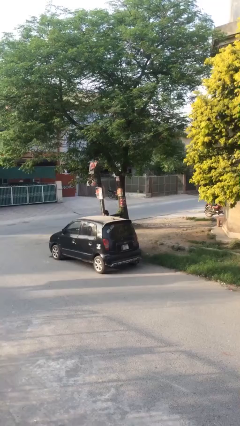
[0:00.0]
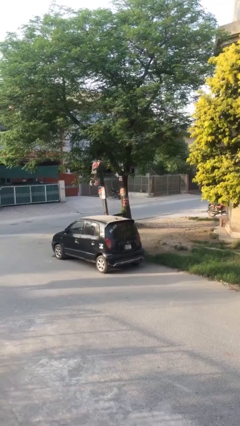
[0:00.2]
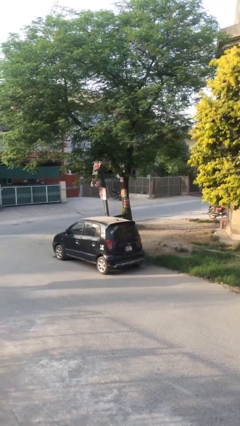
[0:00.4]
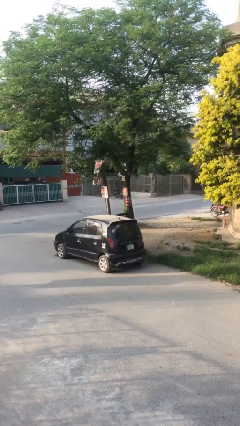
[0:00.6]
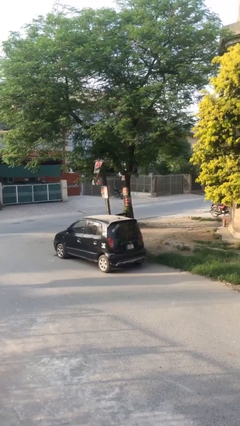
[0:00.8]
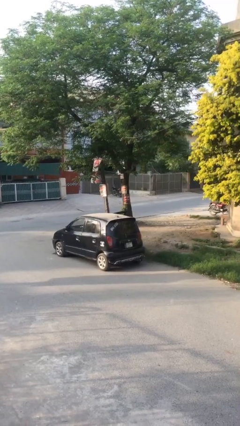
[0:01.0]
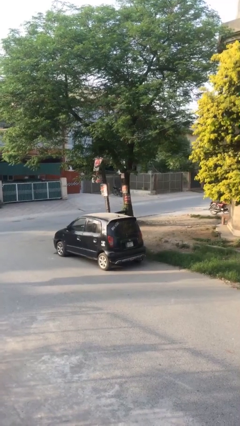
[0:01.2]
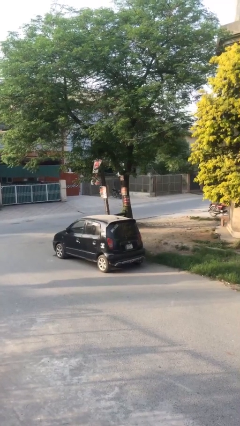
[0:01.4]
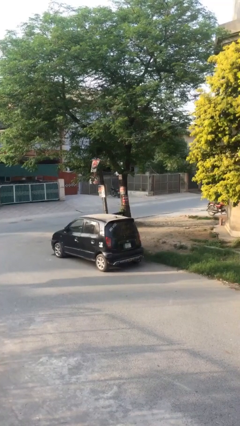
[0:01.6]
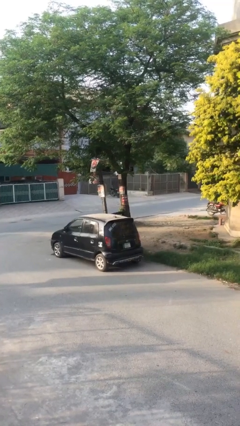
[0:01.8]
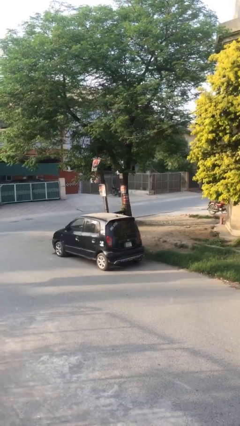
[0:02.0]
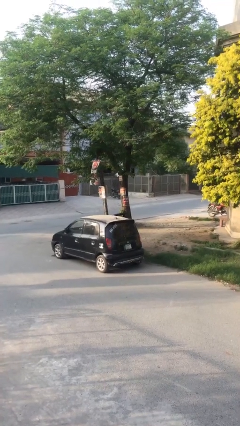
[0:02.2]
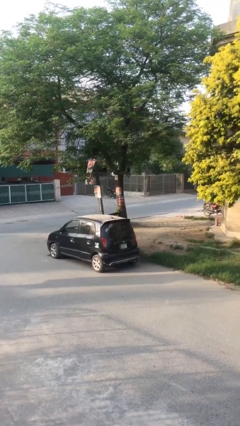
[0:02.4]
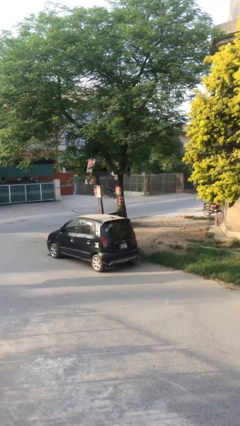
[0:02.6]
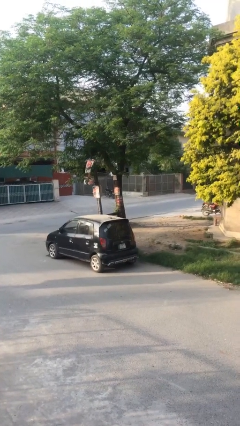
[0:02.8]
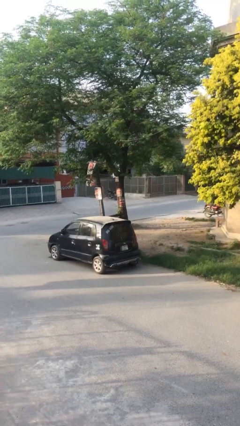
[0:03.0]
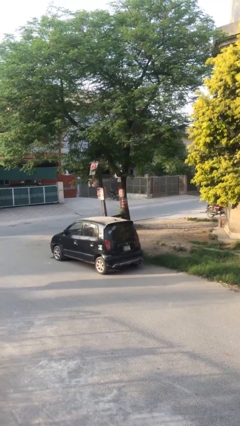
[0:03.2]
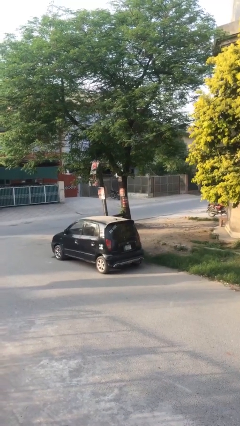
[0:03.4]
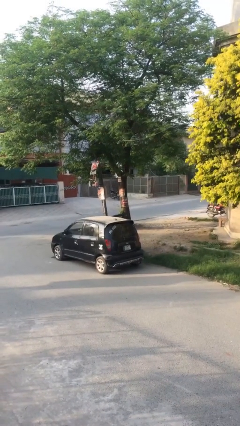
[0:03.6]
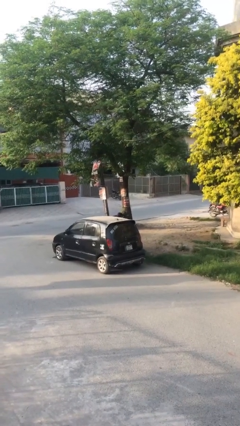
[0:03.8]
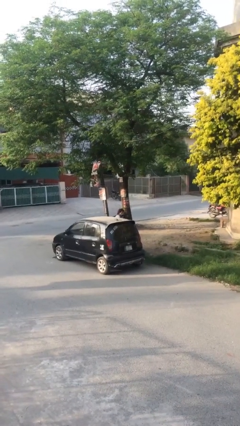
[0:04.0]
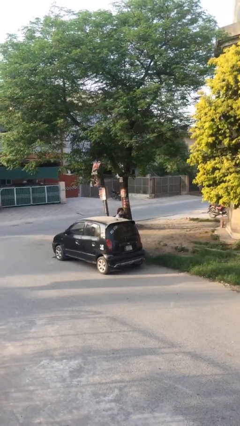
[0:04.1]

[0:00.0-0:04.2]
person enters car

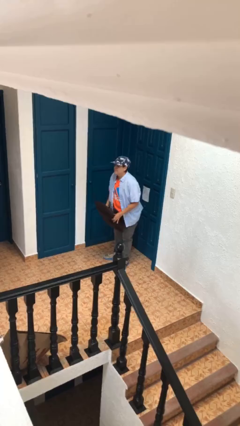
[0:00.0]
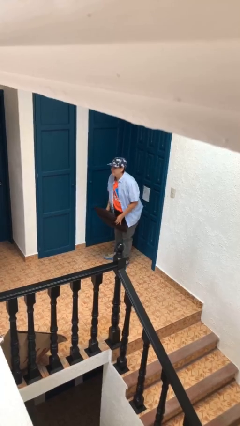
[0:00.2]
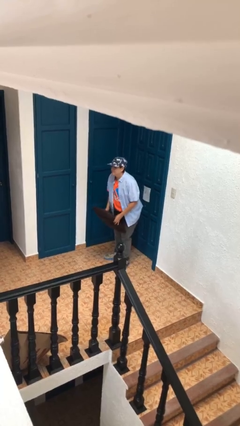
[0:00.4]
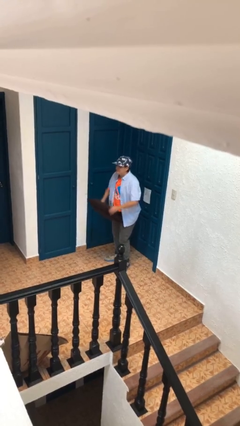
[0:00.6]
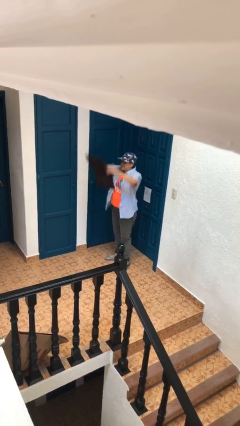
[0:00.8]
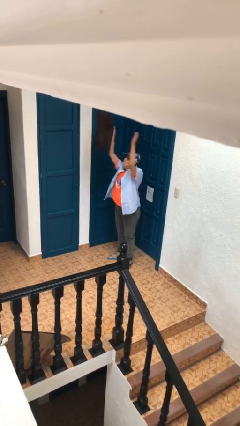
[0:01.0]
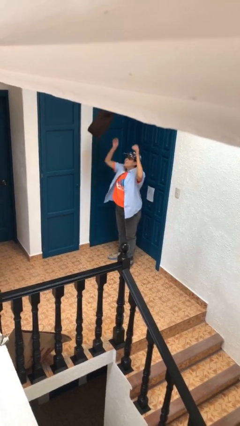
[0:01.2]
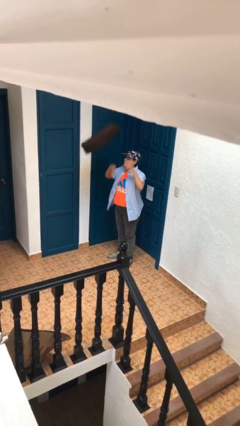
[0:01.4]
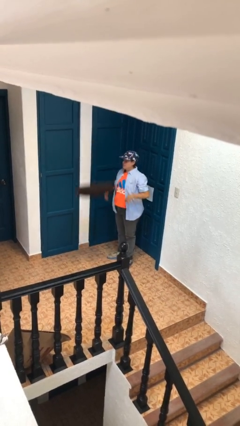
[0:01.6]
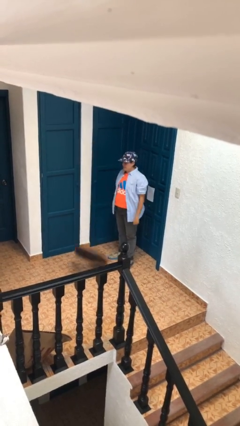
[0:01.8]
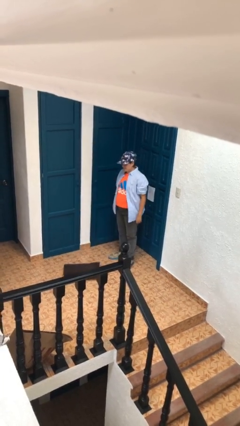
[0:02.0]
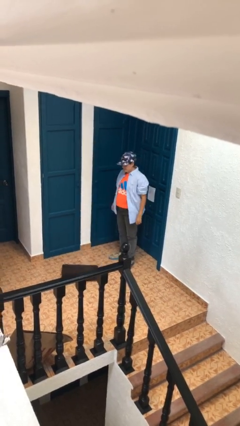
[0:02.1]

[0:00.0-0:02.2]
person throws object into air

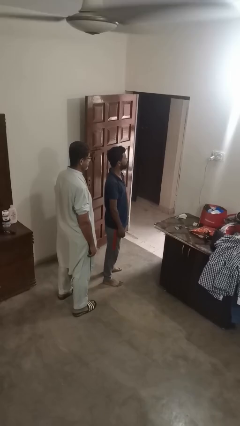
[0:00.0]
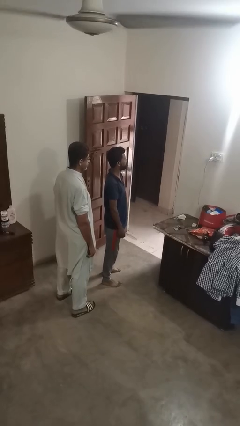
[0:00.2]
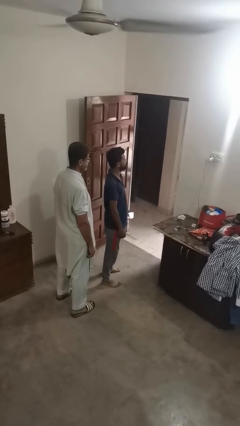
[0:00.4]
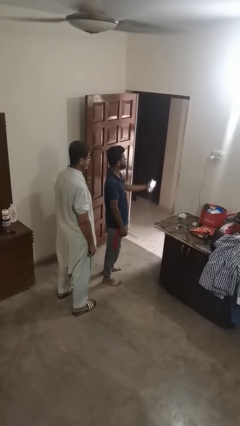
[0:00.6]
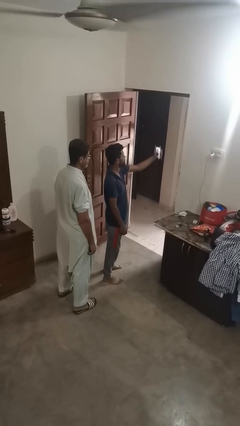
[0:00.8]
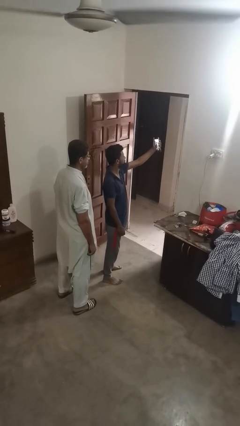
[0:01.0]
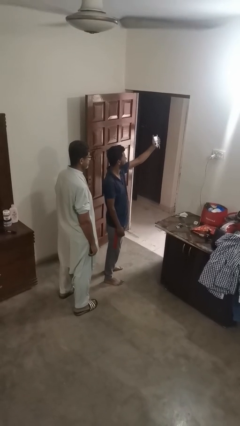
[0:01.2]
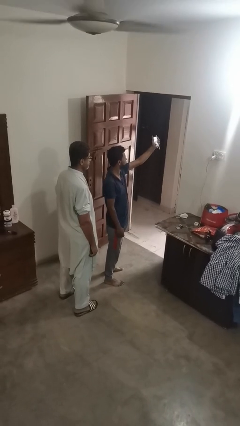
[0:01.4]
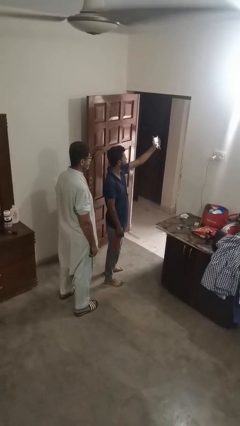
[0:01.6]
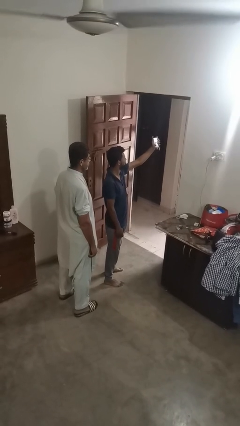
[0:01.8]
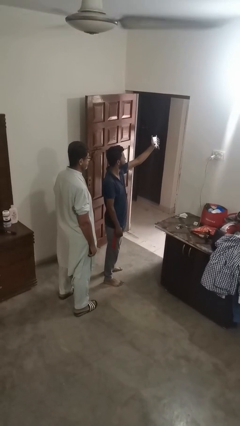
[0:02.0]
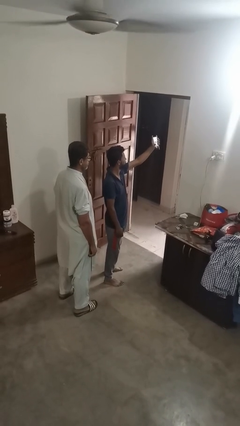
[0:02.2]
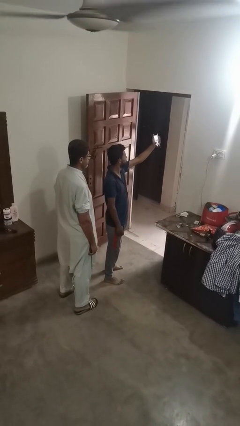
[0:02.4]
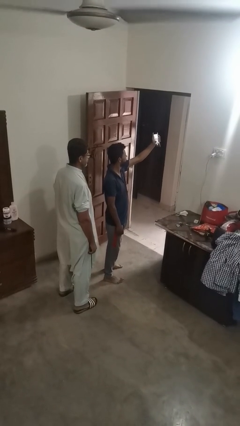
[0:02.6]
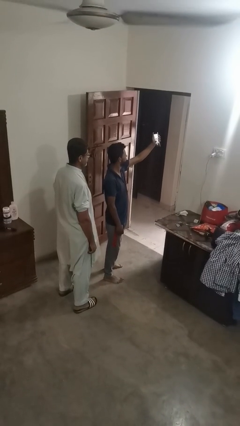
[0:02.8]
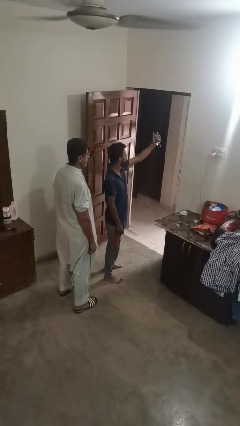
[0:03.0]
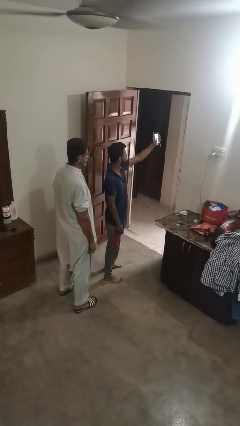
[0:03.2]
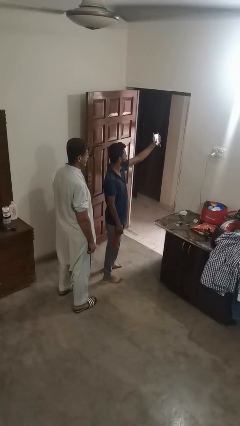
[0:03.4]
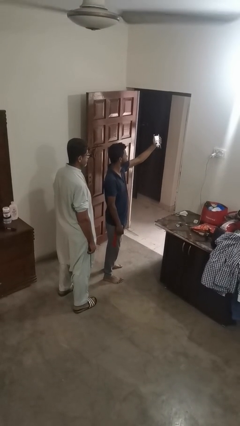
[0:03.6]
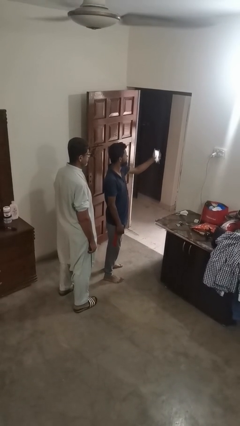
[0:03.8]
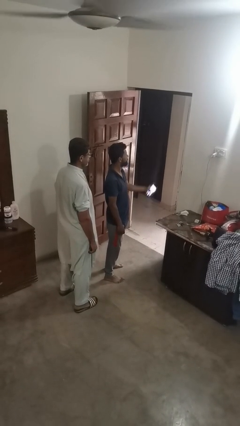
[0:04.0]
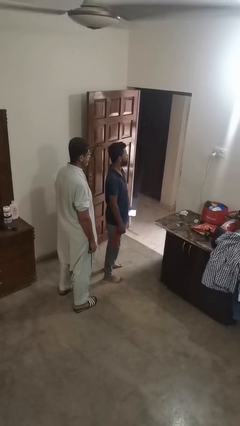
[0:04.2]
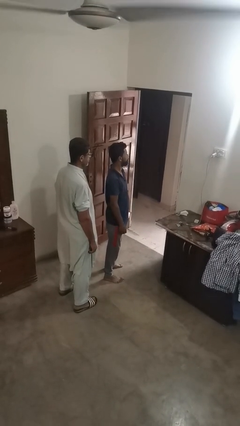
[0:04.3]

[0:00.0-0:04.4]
person takes selfie with person

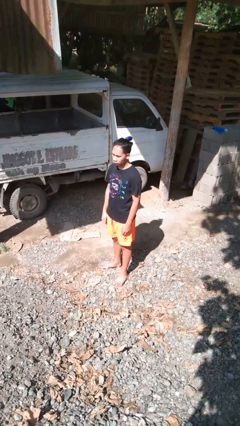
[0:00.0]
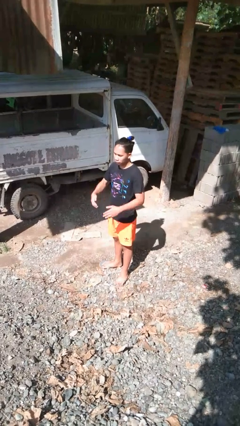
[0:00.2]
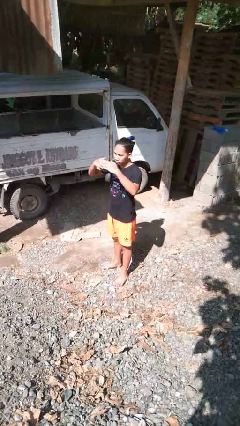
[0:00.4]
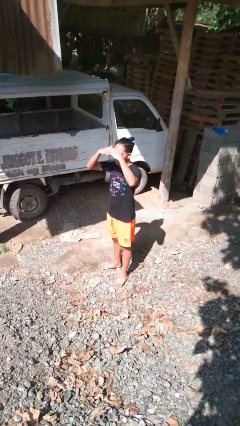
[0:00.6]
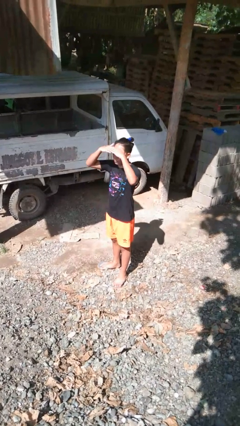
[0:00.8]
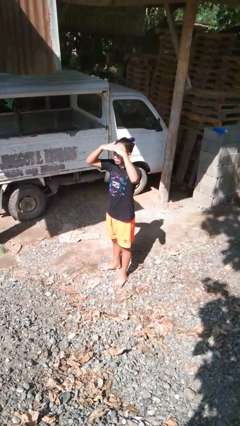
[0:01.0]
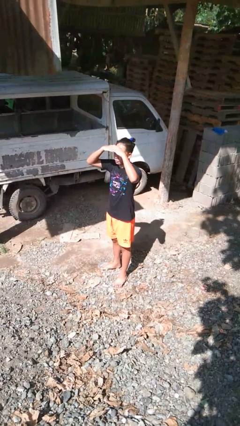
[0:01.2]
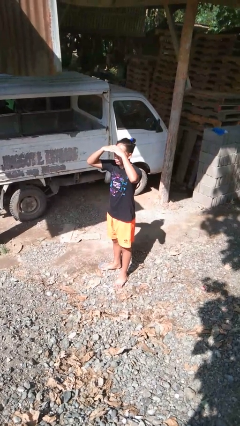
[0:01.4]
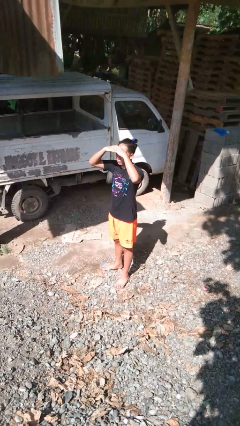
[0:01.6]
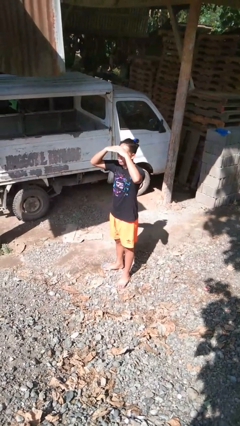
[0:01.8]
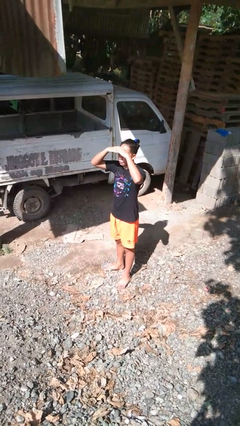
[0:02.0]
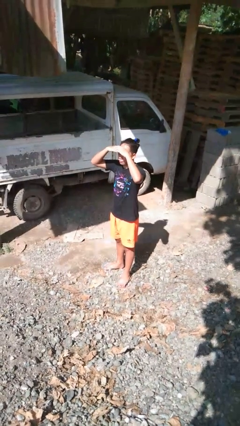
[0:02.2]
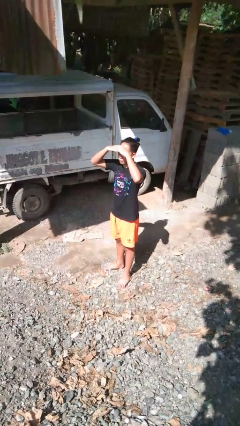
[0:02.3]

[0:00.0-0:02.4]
person shades eyes

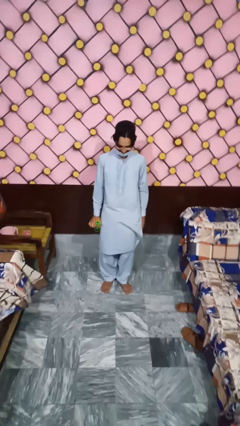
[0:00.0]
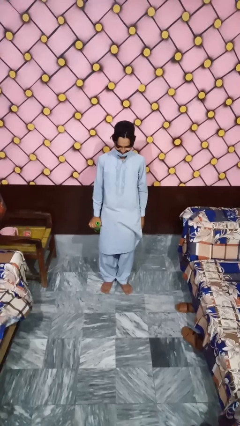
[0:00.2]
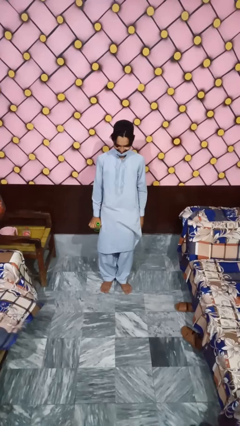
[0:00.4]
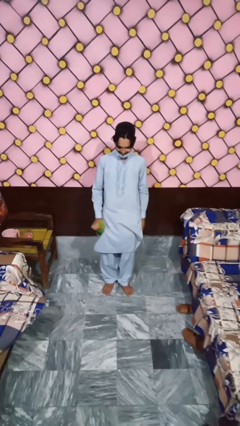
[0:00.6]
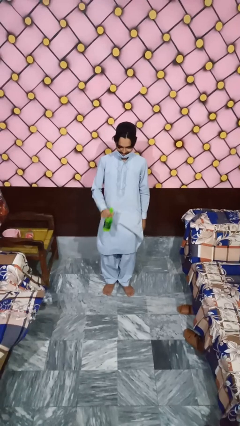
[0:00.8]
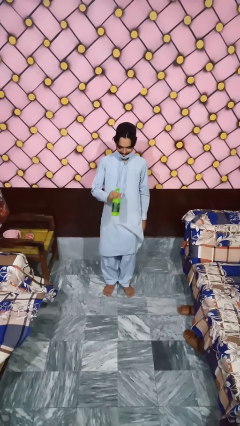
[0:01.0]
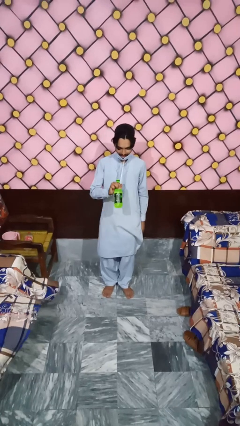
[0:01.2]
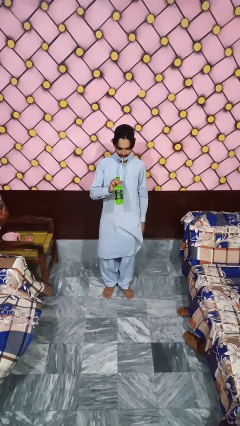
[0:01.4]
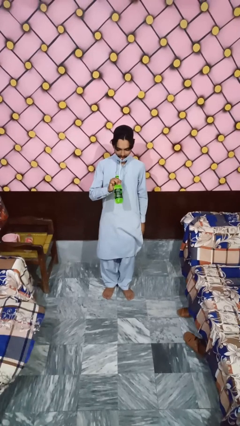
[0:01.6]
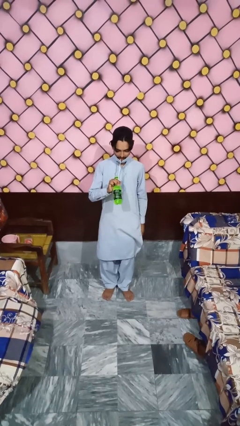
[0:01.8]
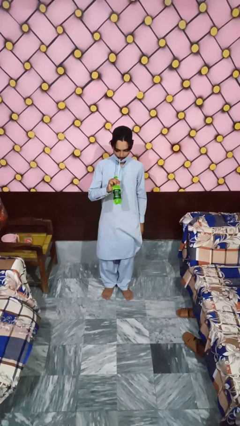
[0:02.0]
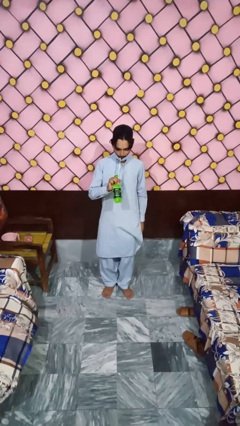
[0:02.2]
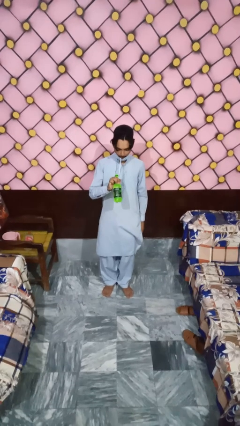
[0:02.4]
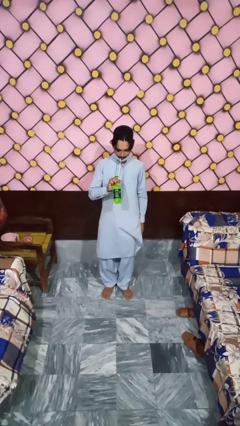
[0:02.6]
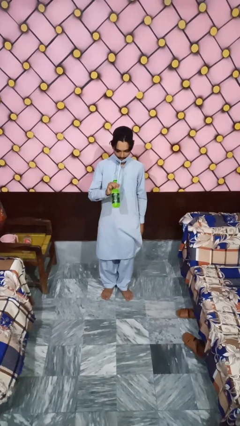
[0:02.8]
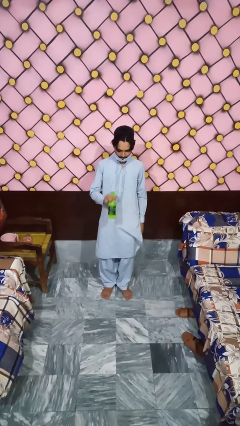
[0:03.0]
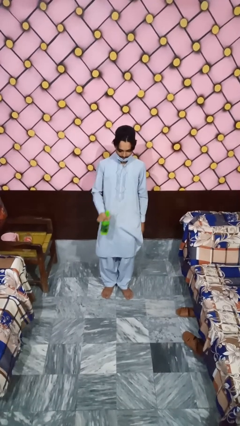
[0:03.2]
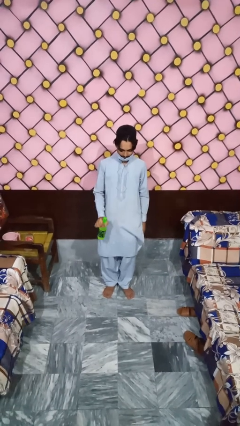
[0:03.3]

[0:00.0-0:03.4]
person drinks from straw

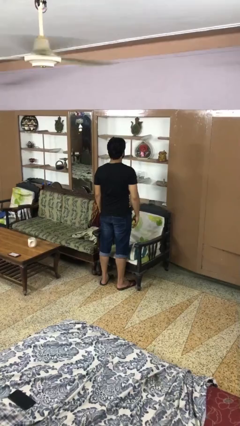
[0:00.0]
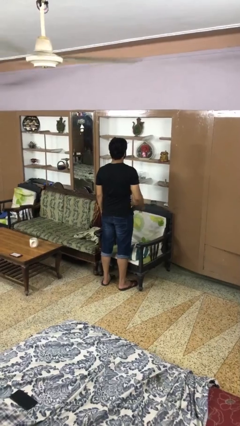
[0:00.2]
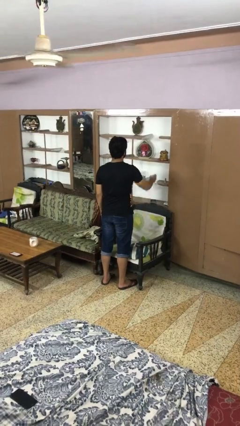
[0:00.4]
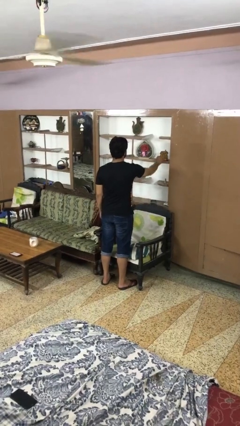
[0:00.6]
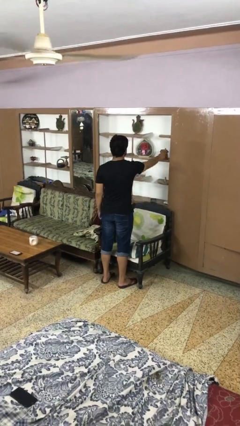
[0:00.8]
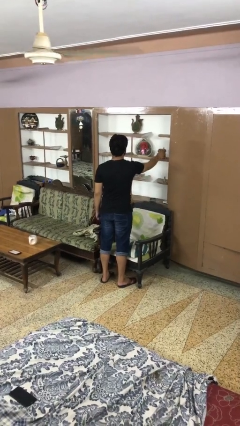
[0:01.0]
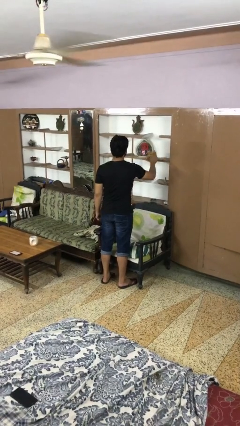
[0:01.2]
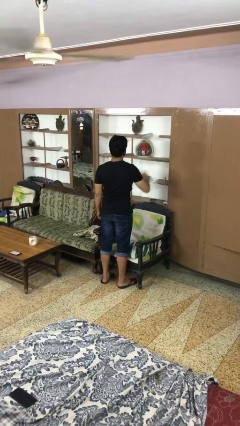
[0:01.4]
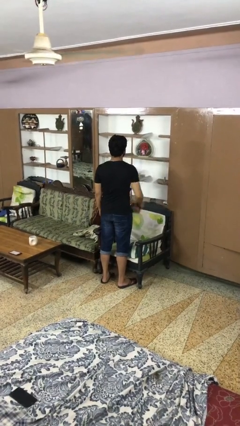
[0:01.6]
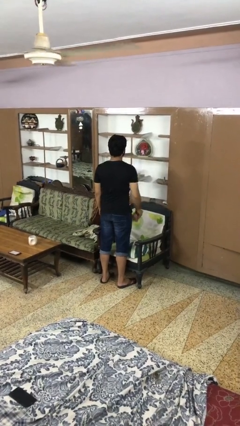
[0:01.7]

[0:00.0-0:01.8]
person picks up object from shelf
